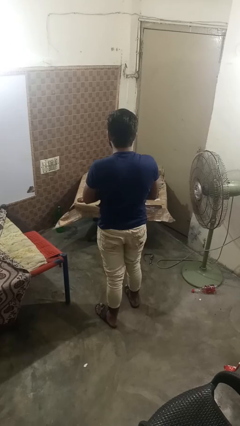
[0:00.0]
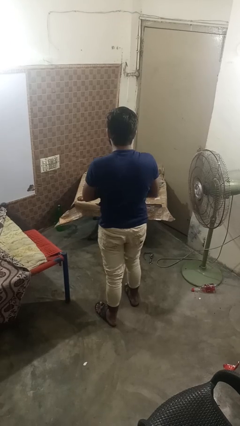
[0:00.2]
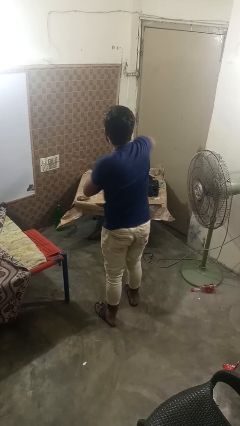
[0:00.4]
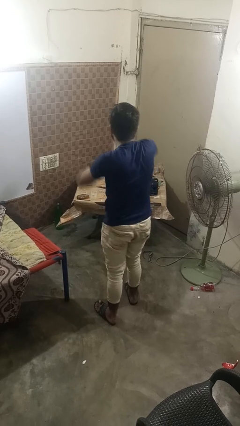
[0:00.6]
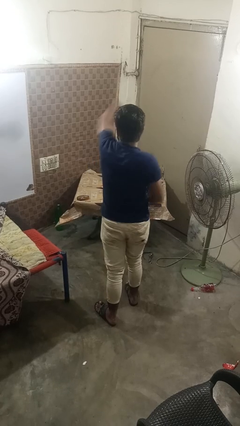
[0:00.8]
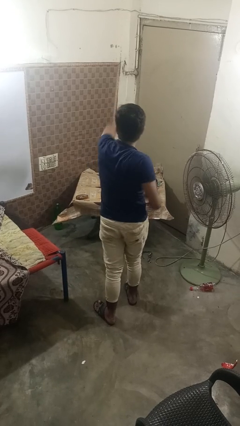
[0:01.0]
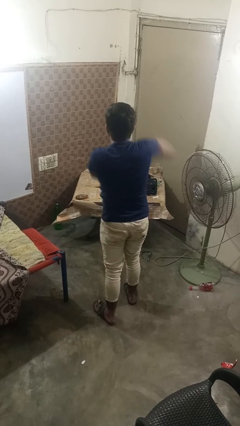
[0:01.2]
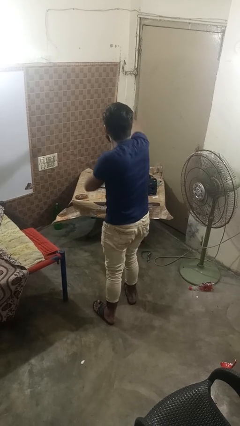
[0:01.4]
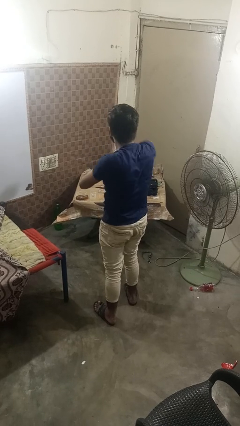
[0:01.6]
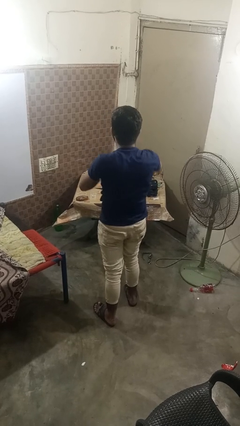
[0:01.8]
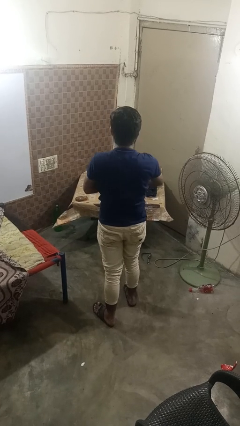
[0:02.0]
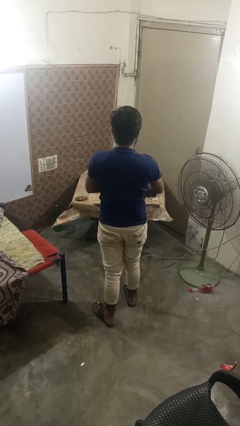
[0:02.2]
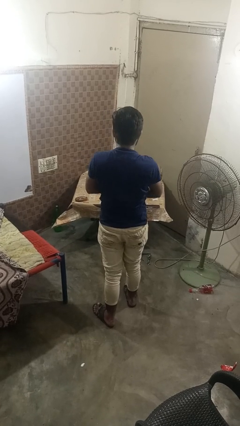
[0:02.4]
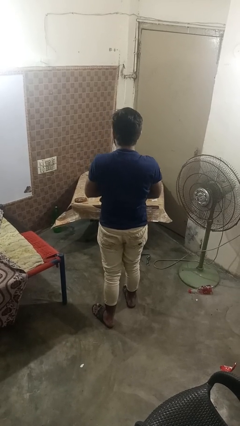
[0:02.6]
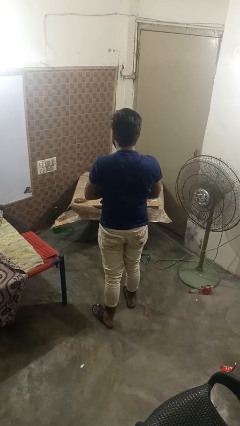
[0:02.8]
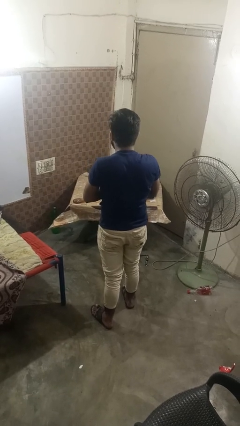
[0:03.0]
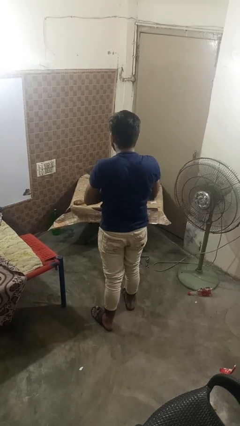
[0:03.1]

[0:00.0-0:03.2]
person punches

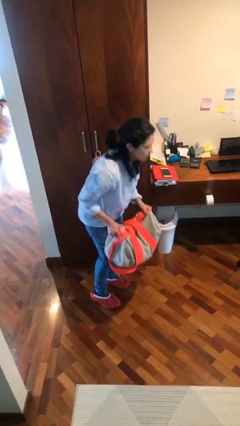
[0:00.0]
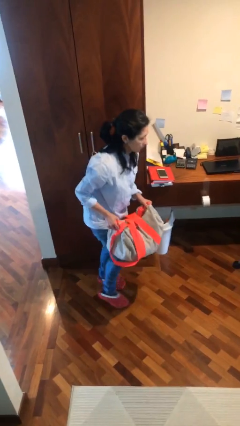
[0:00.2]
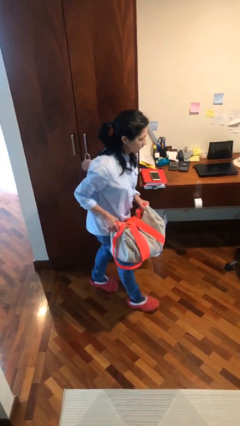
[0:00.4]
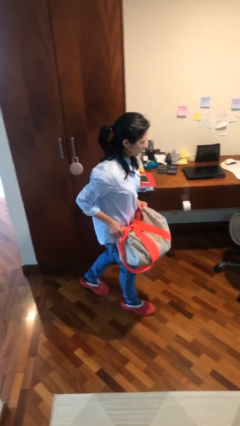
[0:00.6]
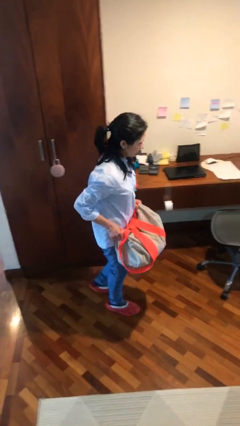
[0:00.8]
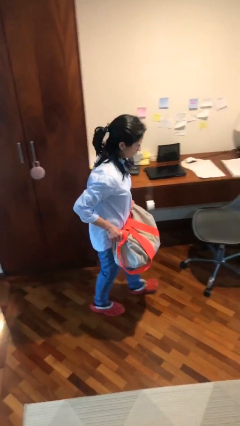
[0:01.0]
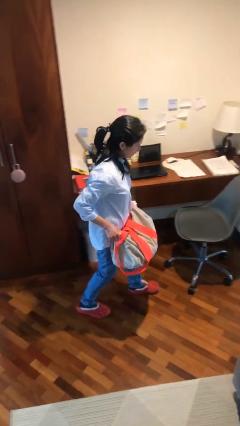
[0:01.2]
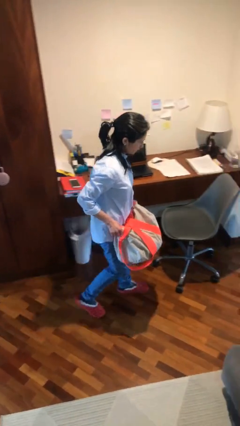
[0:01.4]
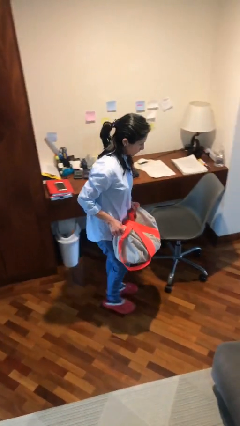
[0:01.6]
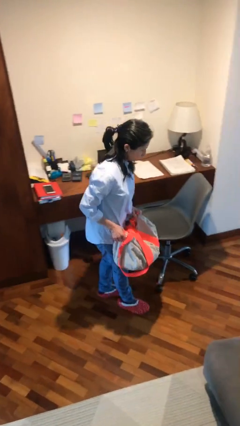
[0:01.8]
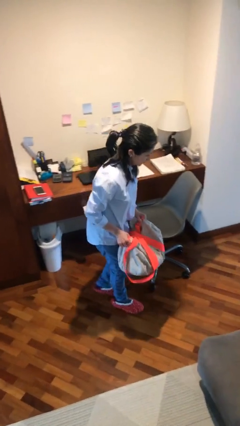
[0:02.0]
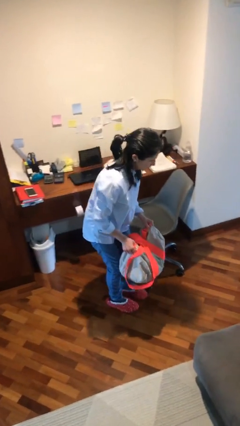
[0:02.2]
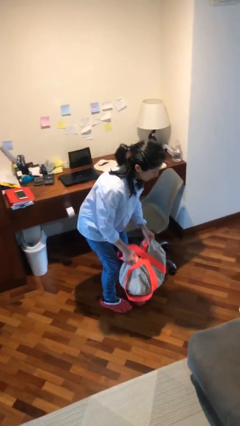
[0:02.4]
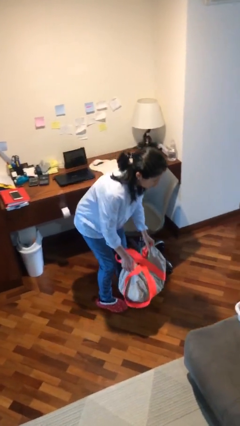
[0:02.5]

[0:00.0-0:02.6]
person carries heavy object

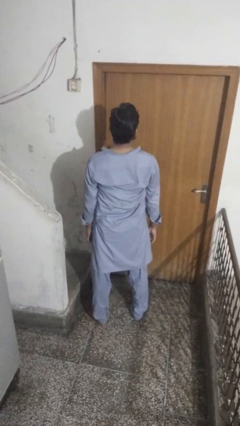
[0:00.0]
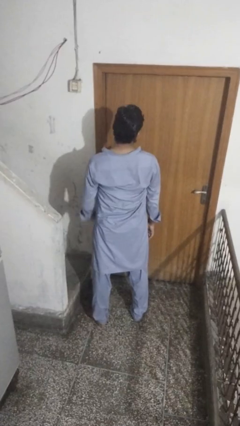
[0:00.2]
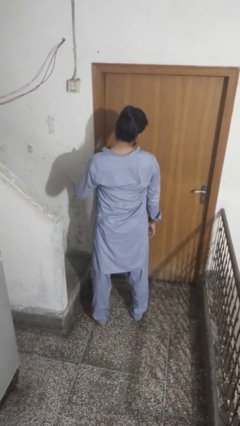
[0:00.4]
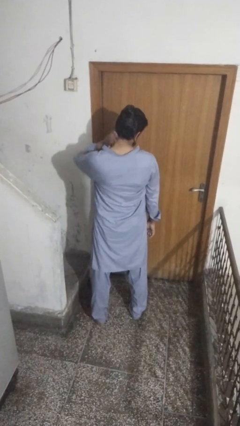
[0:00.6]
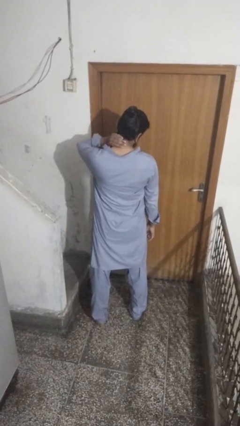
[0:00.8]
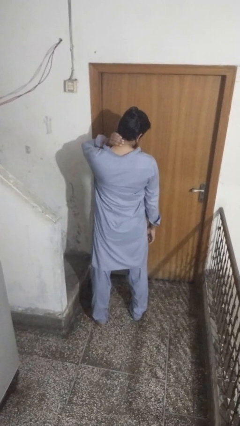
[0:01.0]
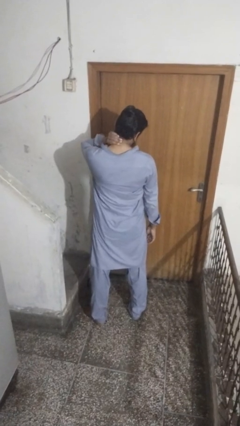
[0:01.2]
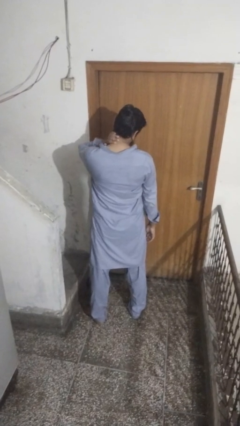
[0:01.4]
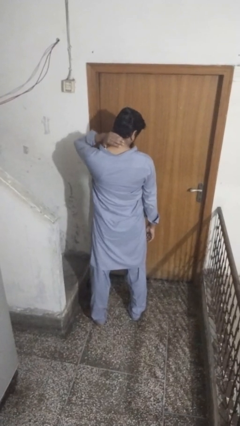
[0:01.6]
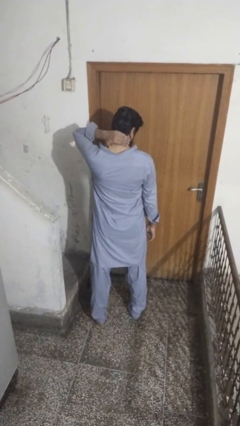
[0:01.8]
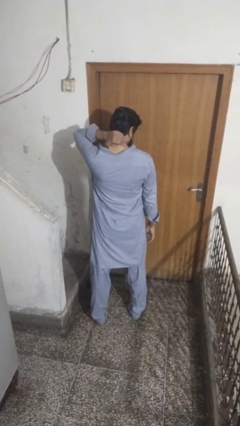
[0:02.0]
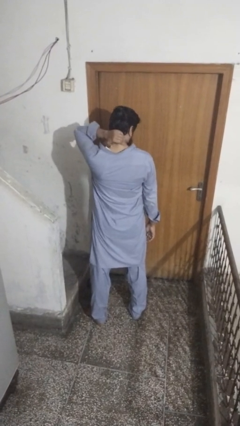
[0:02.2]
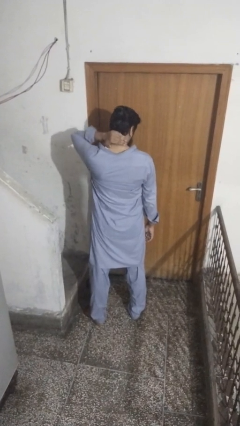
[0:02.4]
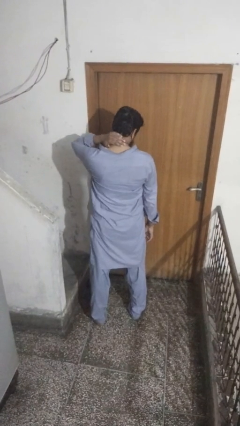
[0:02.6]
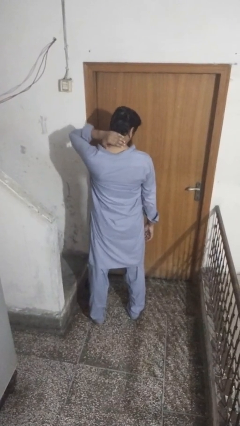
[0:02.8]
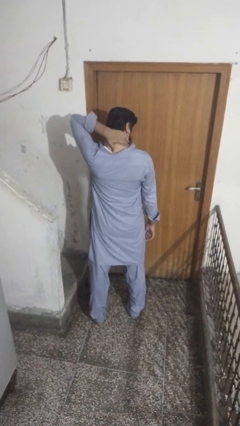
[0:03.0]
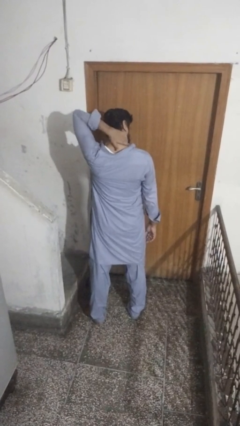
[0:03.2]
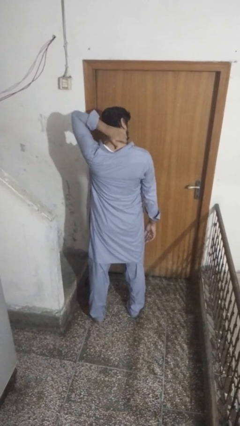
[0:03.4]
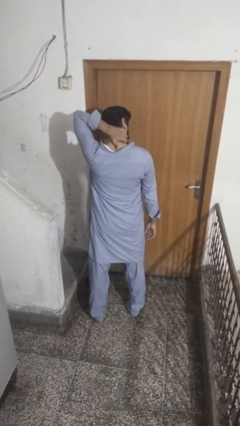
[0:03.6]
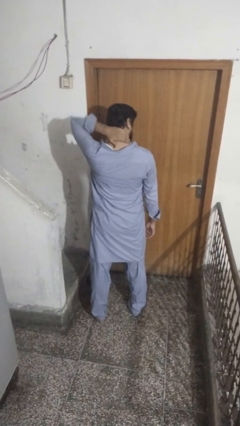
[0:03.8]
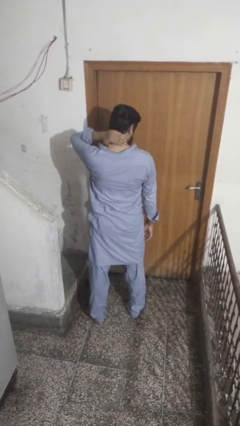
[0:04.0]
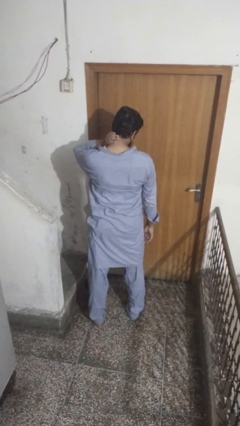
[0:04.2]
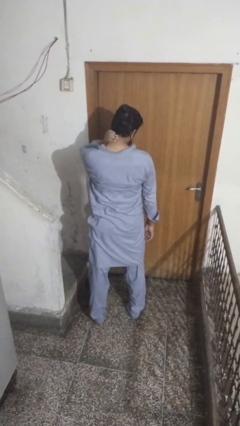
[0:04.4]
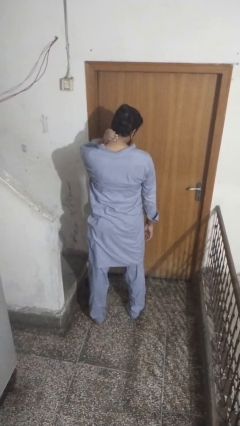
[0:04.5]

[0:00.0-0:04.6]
person rubs neck

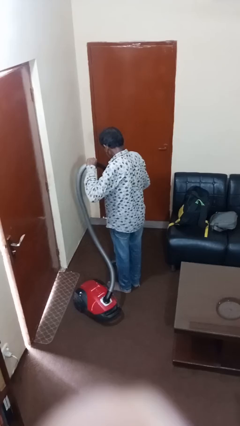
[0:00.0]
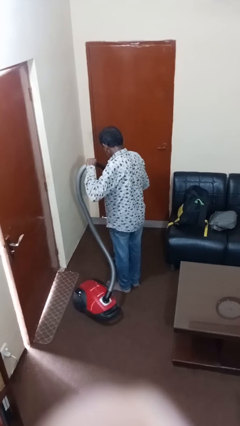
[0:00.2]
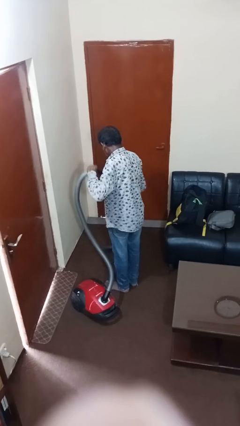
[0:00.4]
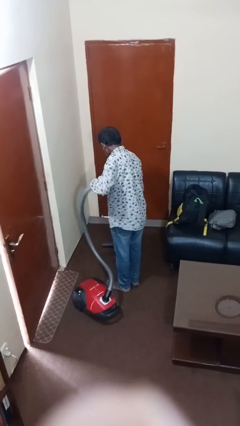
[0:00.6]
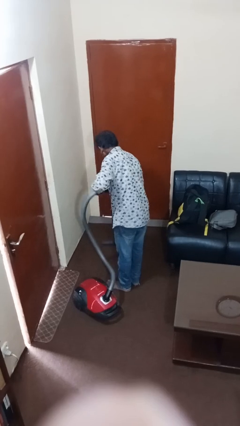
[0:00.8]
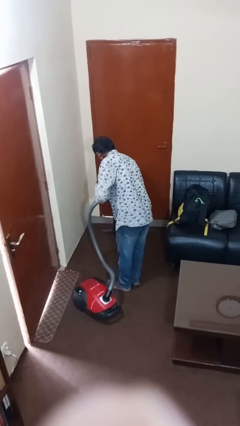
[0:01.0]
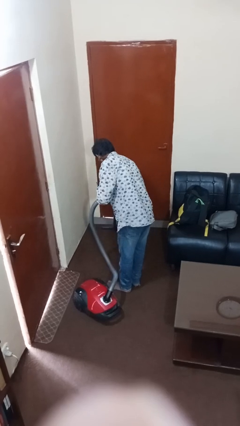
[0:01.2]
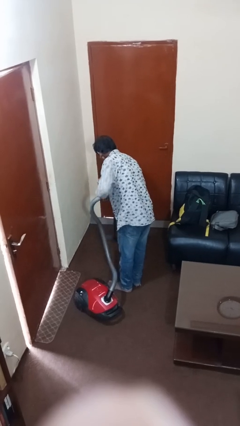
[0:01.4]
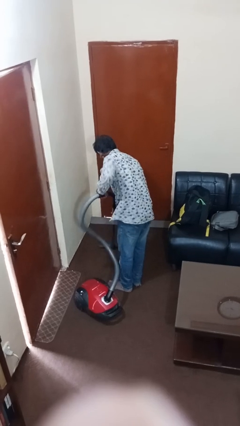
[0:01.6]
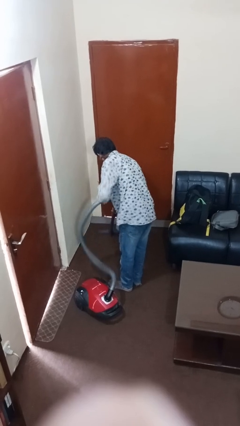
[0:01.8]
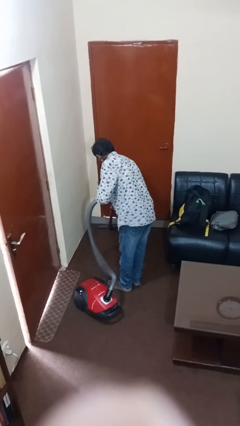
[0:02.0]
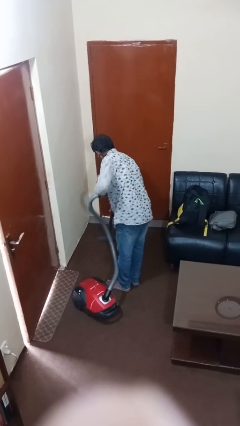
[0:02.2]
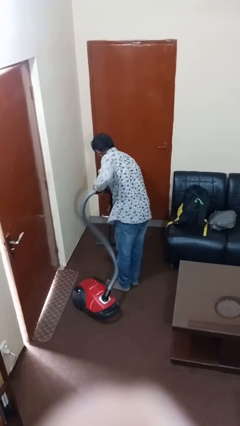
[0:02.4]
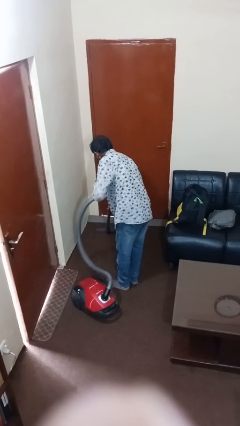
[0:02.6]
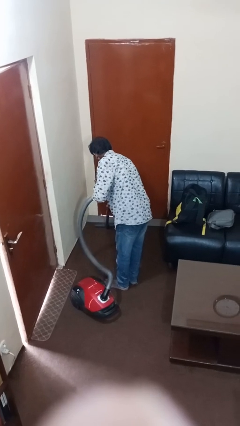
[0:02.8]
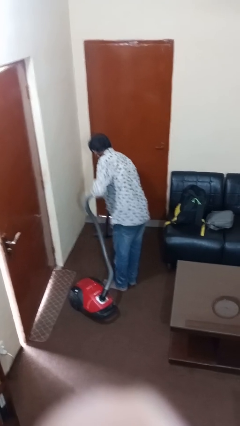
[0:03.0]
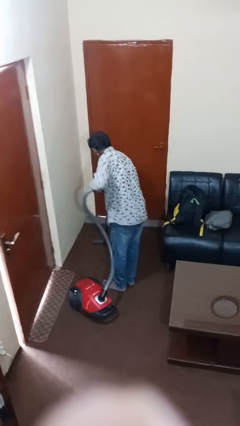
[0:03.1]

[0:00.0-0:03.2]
person vacuums carpet

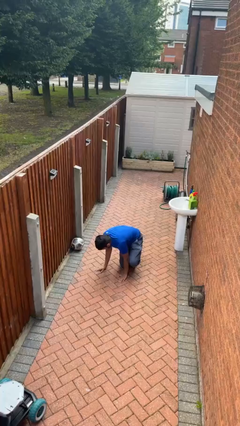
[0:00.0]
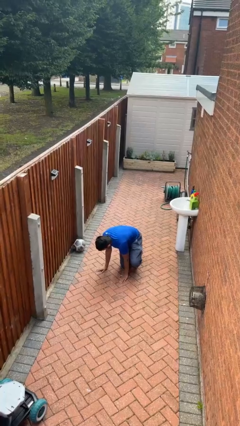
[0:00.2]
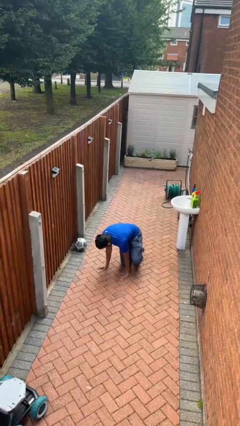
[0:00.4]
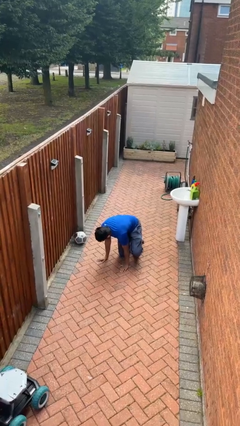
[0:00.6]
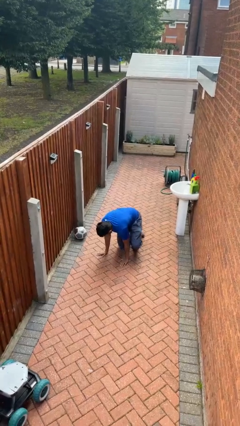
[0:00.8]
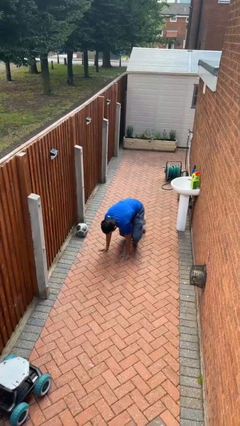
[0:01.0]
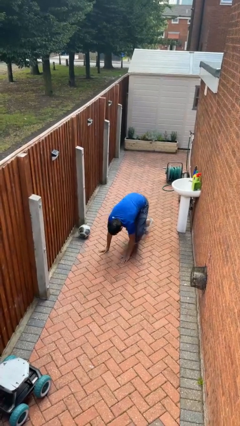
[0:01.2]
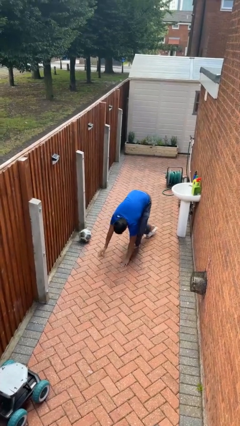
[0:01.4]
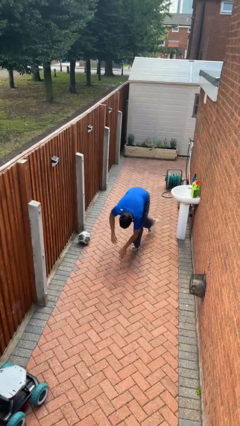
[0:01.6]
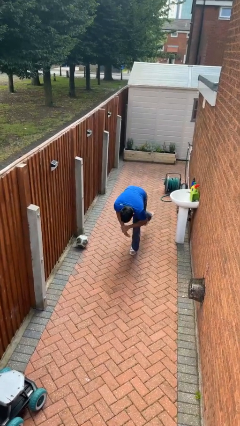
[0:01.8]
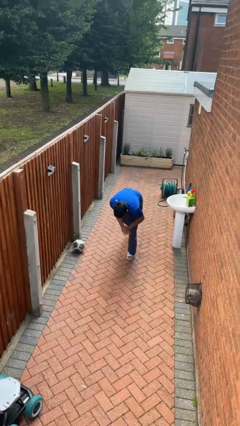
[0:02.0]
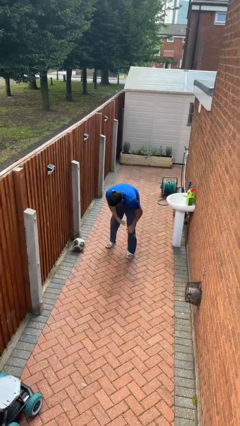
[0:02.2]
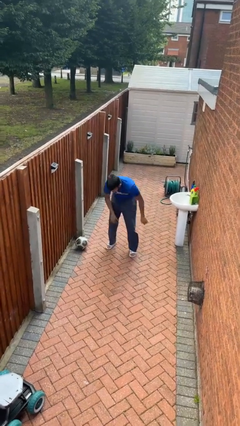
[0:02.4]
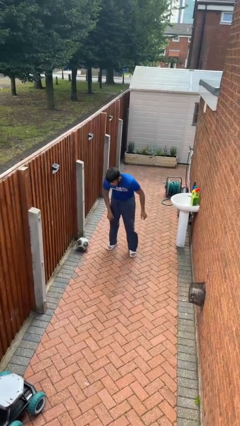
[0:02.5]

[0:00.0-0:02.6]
person stands up from floor

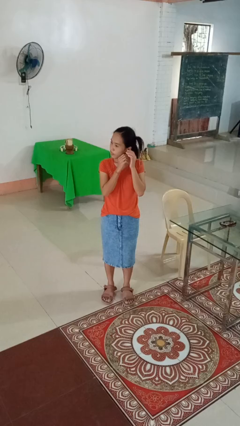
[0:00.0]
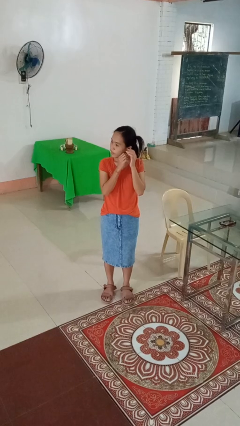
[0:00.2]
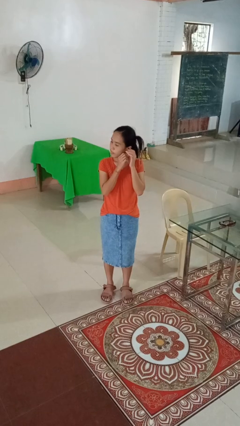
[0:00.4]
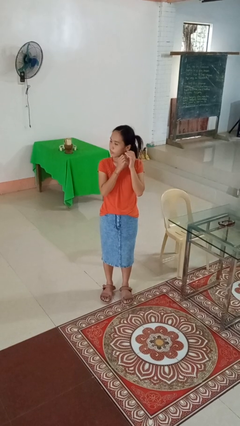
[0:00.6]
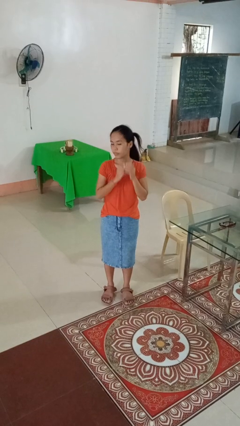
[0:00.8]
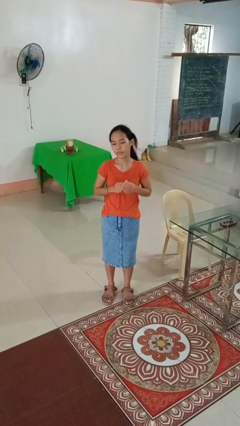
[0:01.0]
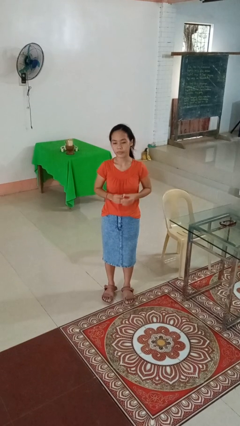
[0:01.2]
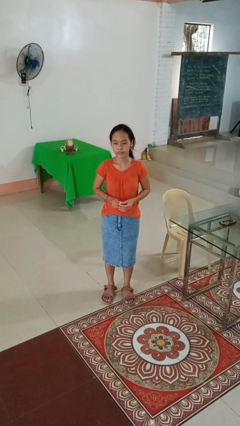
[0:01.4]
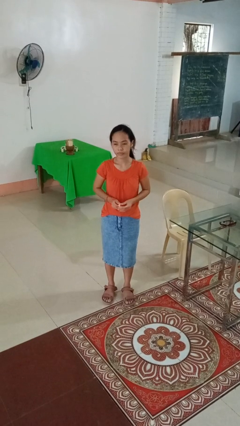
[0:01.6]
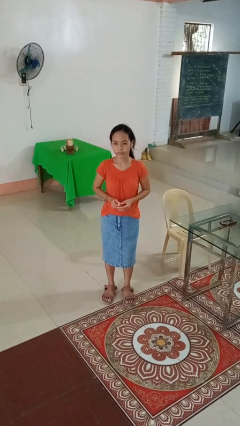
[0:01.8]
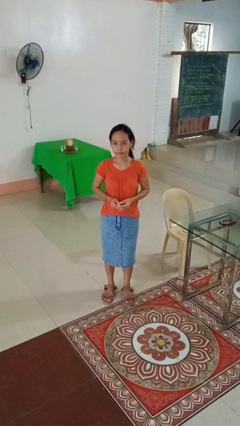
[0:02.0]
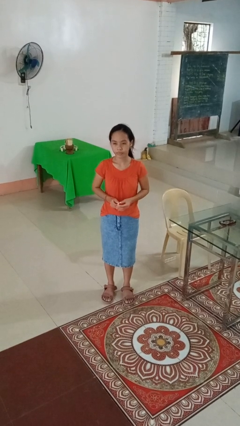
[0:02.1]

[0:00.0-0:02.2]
person takes off earrings
